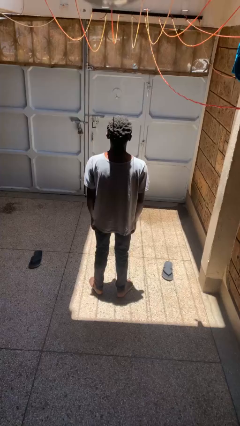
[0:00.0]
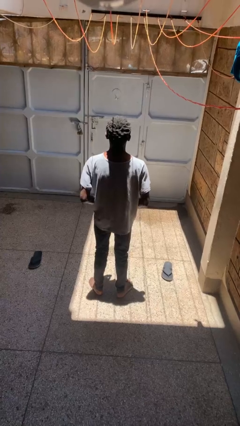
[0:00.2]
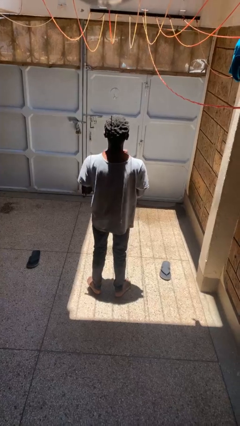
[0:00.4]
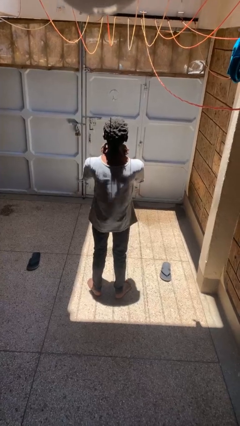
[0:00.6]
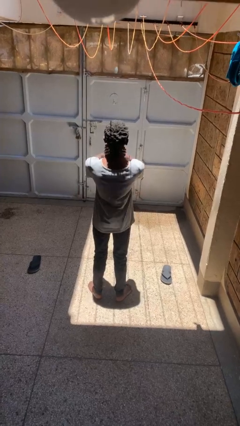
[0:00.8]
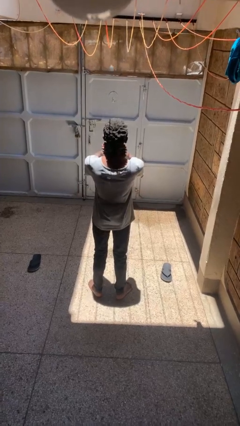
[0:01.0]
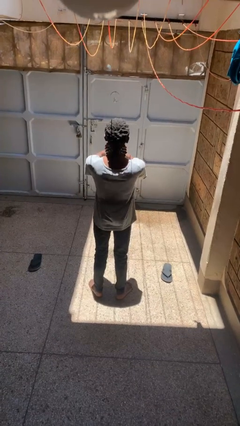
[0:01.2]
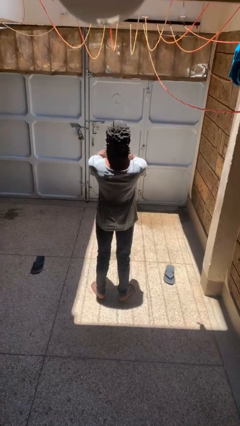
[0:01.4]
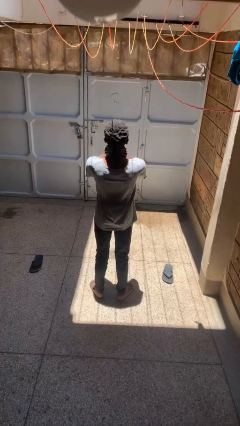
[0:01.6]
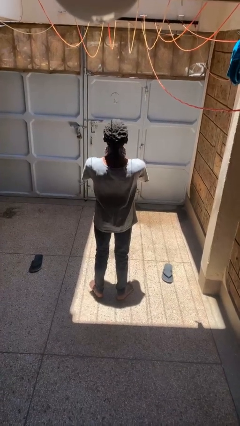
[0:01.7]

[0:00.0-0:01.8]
person rubs neck

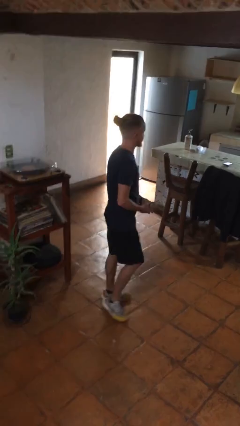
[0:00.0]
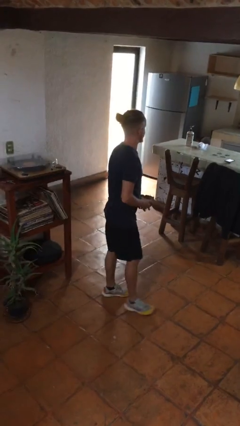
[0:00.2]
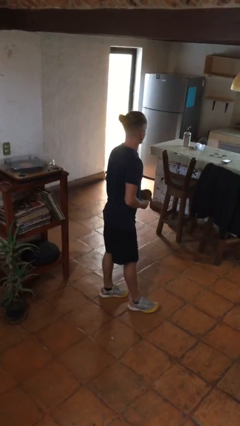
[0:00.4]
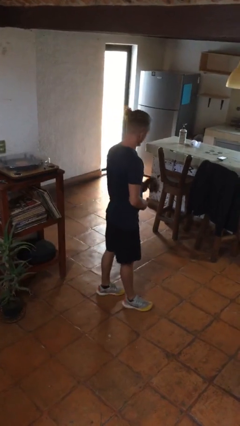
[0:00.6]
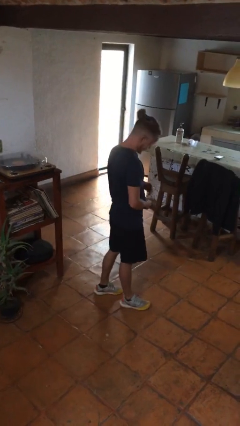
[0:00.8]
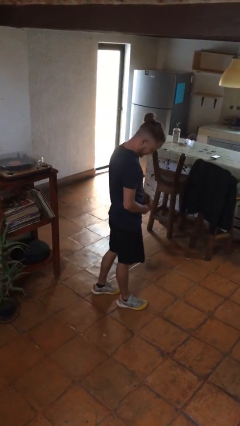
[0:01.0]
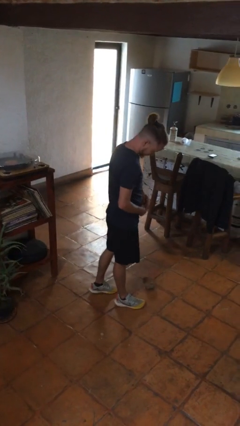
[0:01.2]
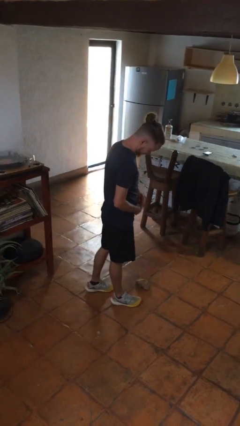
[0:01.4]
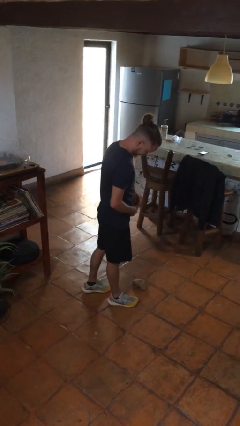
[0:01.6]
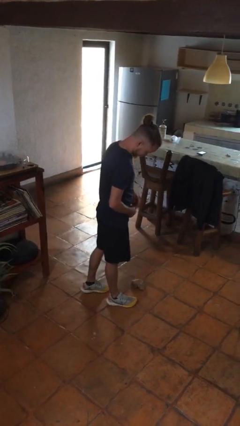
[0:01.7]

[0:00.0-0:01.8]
person drops object

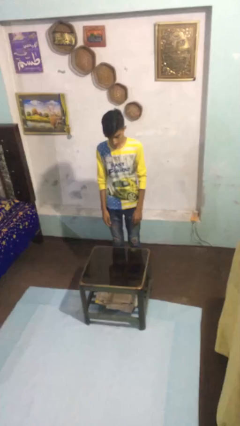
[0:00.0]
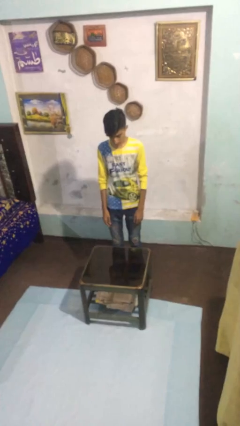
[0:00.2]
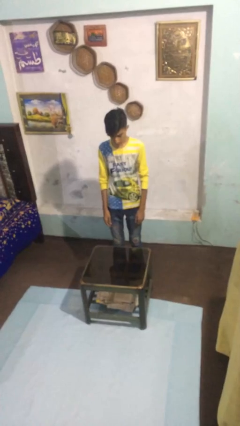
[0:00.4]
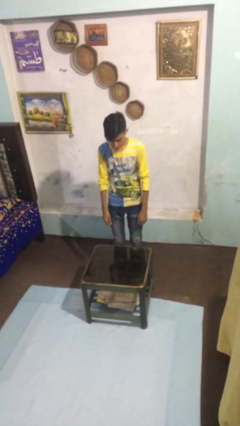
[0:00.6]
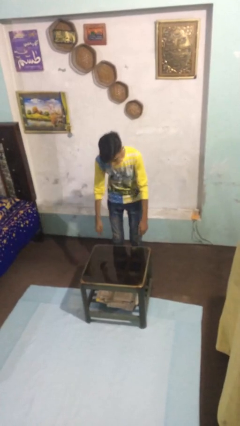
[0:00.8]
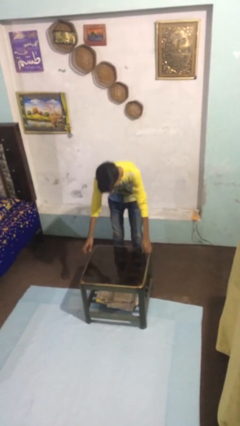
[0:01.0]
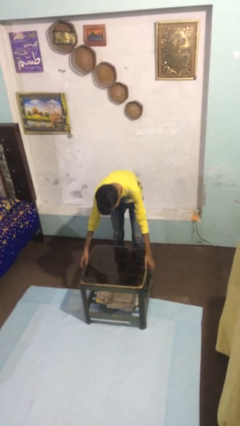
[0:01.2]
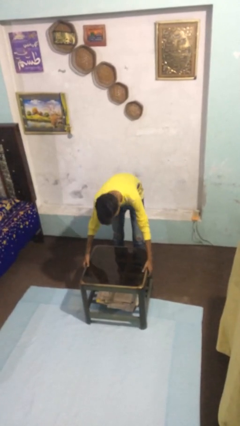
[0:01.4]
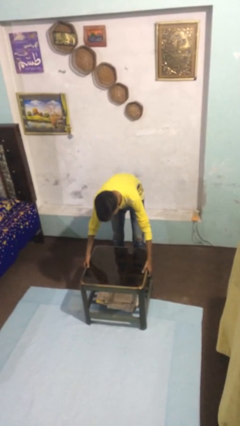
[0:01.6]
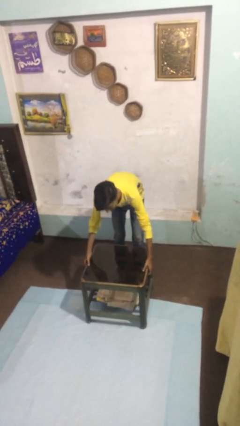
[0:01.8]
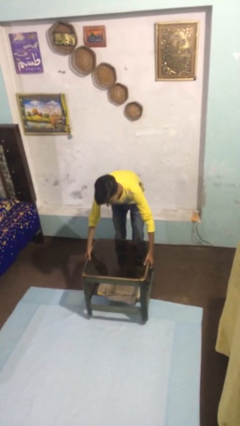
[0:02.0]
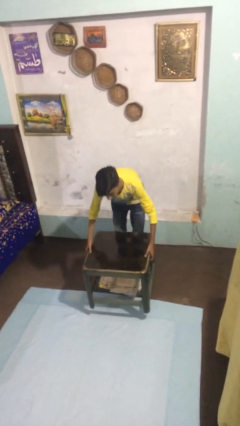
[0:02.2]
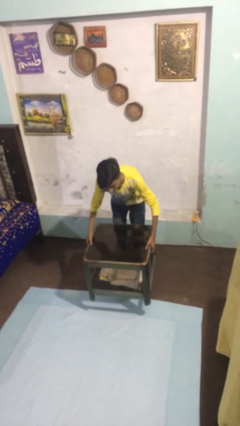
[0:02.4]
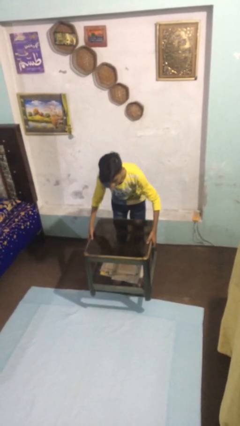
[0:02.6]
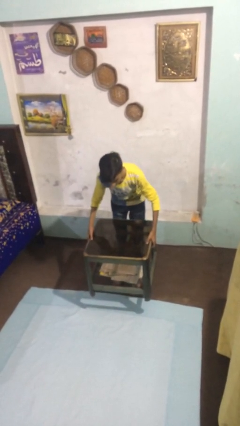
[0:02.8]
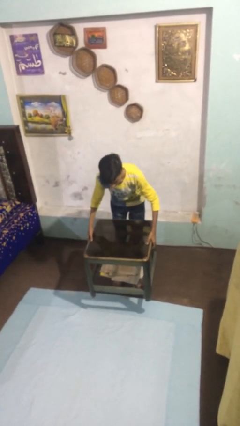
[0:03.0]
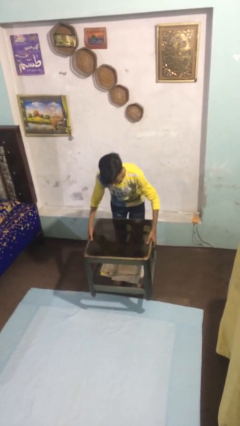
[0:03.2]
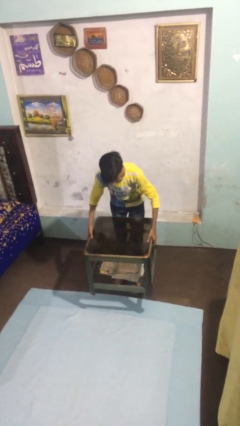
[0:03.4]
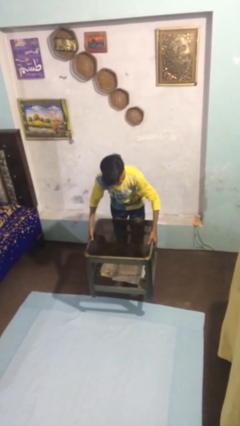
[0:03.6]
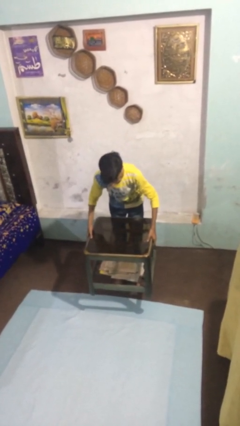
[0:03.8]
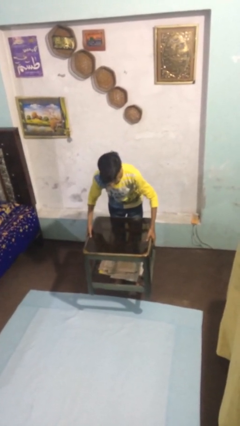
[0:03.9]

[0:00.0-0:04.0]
person picks up object from floor

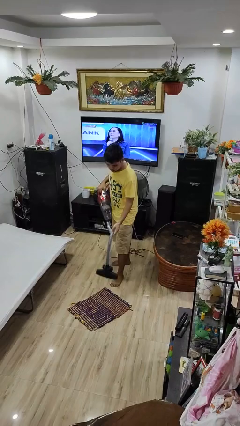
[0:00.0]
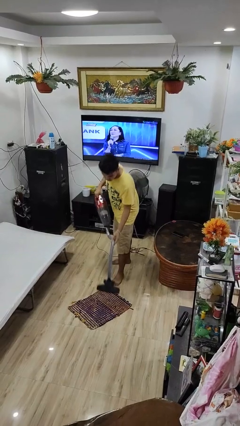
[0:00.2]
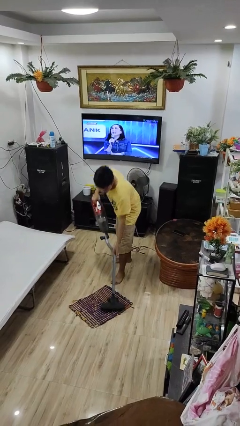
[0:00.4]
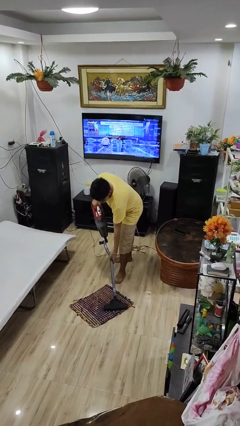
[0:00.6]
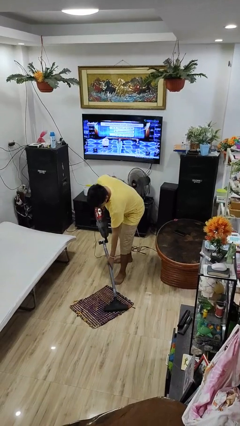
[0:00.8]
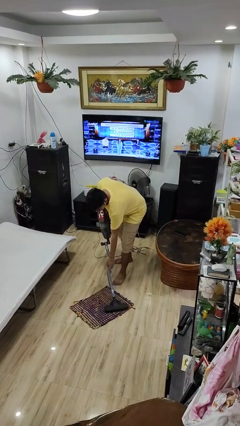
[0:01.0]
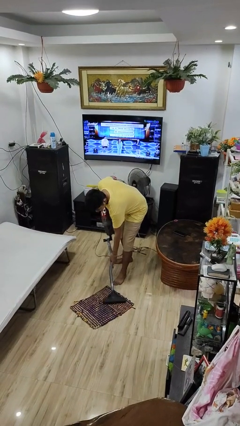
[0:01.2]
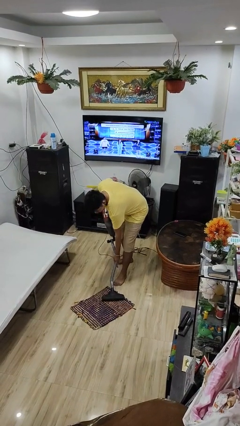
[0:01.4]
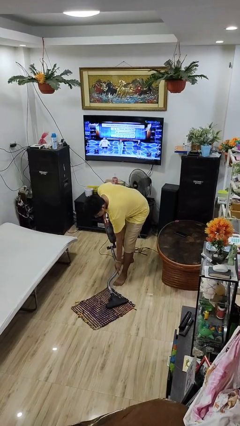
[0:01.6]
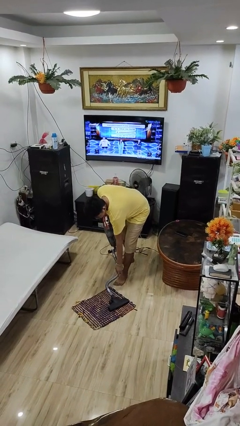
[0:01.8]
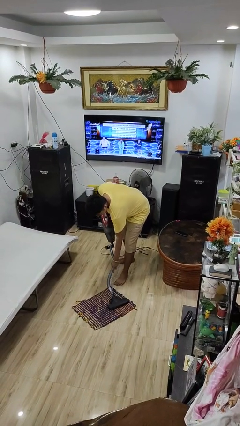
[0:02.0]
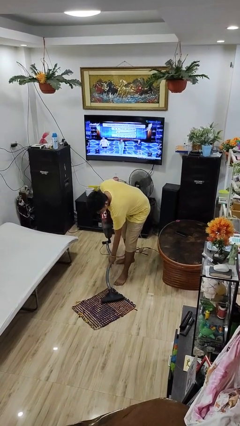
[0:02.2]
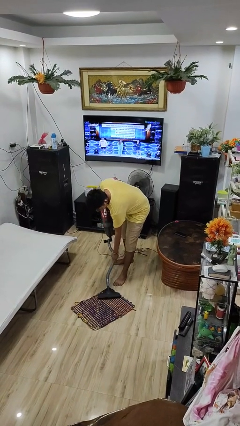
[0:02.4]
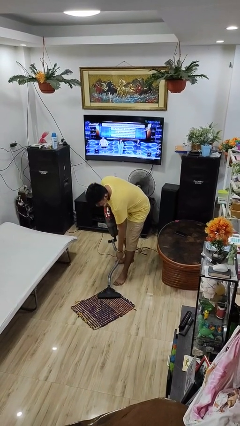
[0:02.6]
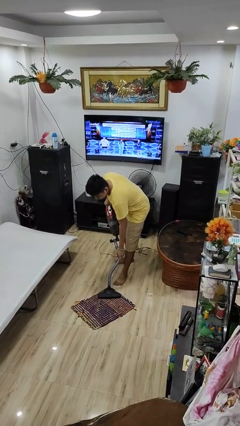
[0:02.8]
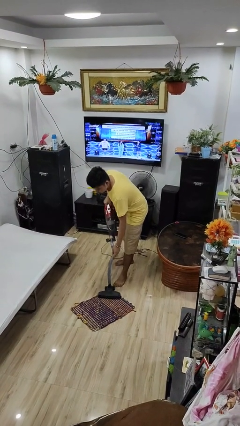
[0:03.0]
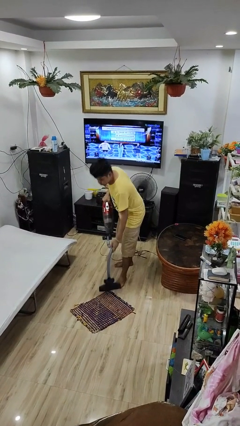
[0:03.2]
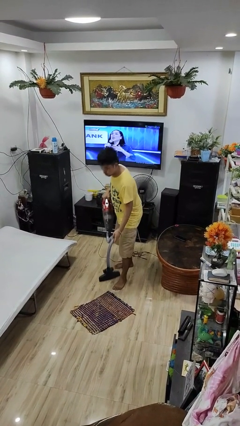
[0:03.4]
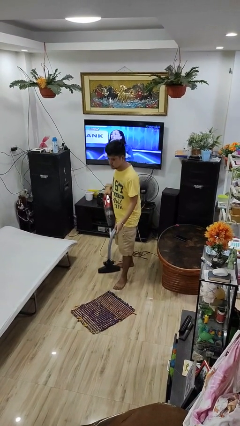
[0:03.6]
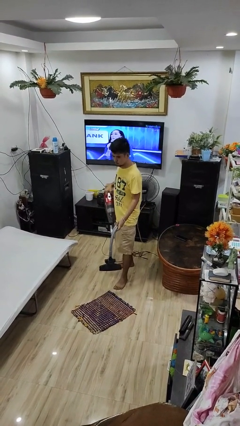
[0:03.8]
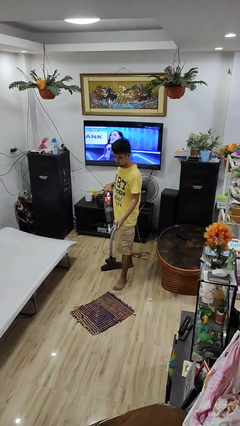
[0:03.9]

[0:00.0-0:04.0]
person vacuums carpet

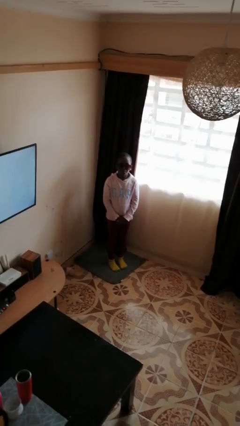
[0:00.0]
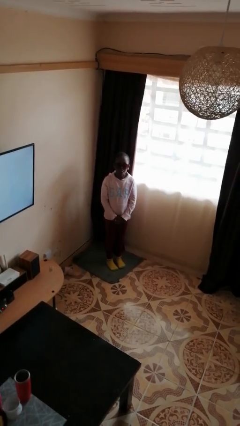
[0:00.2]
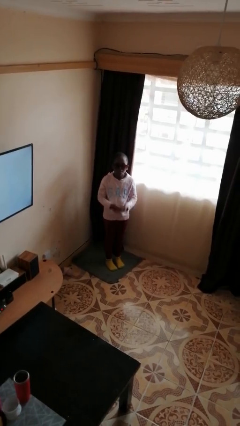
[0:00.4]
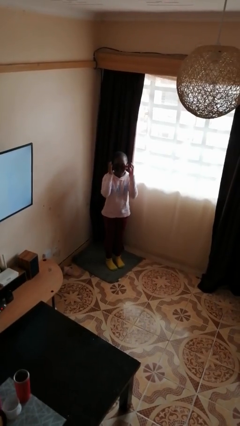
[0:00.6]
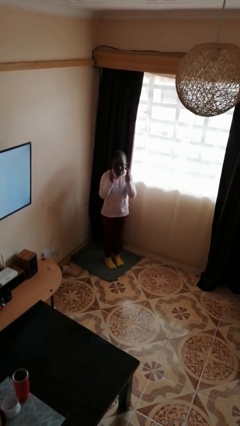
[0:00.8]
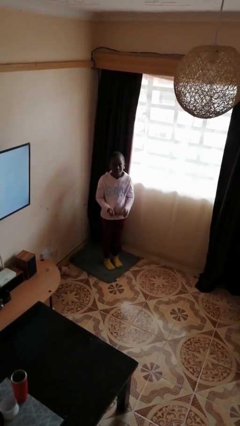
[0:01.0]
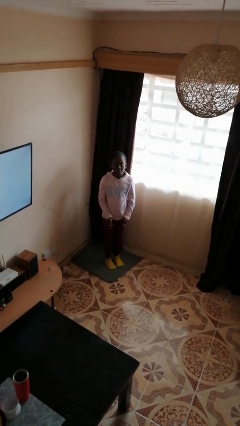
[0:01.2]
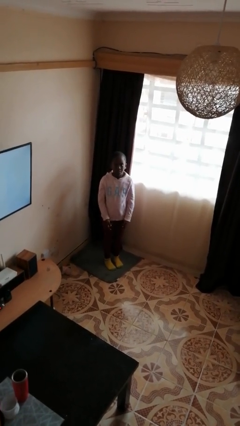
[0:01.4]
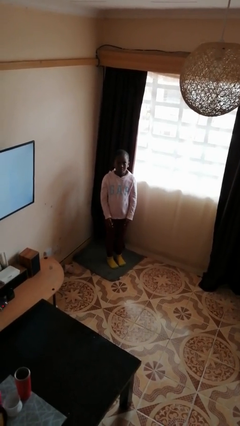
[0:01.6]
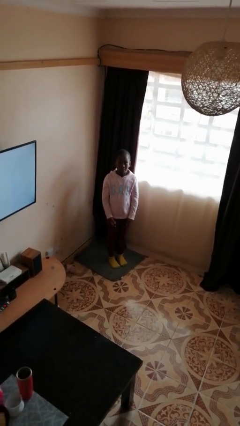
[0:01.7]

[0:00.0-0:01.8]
person takes off sunglasses

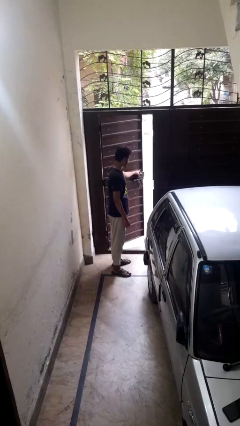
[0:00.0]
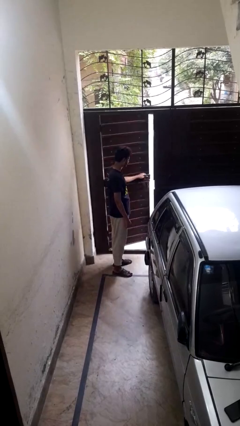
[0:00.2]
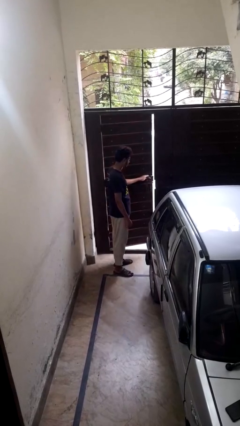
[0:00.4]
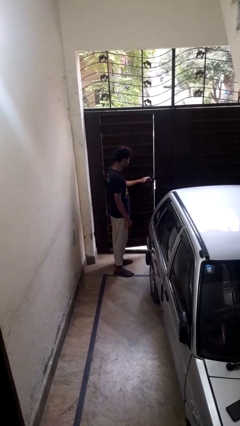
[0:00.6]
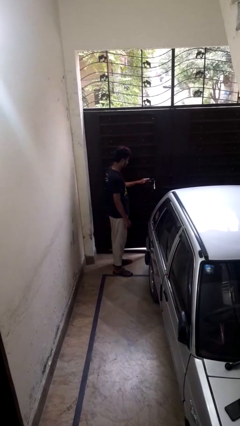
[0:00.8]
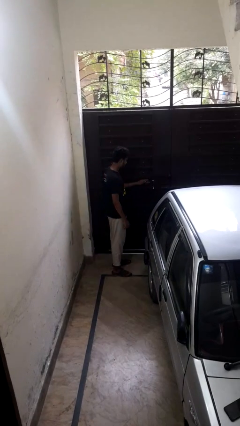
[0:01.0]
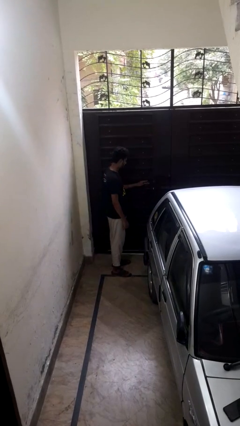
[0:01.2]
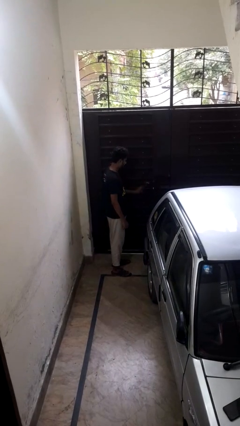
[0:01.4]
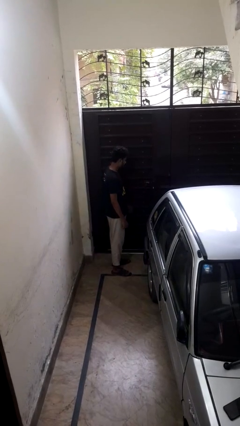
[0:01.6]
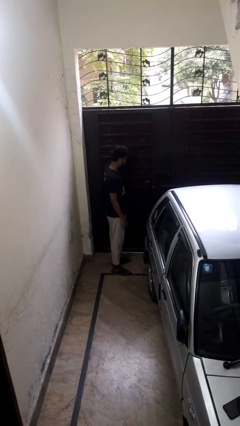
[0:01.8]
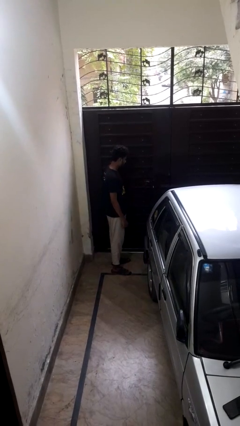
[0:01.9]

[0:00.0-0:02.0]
person closes gate

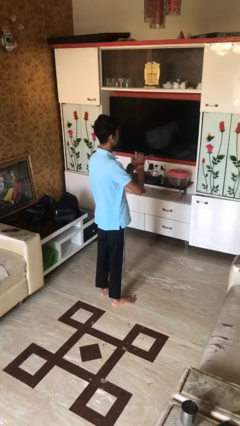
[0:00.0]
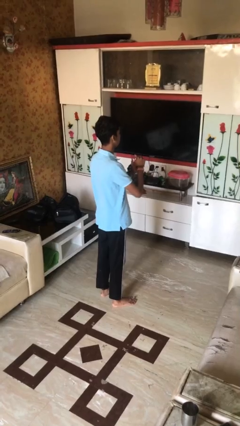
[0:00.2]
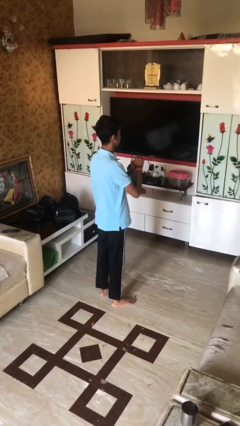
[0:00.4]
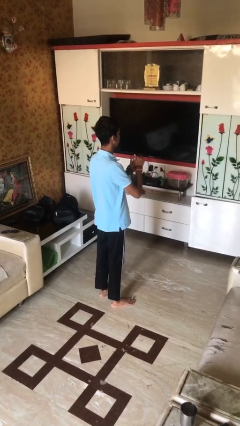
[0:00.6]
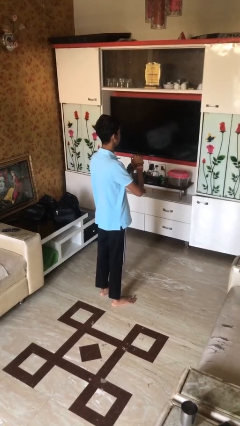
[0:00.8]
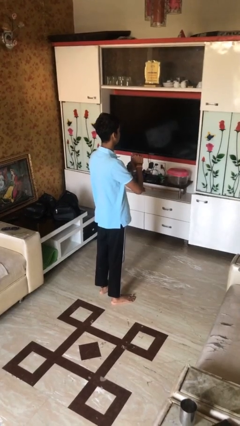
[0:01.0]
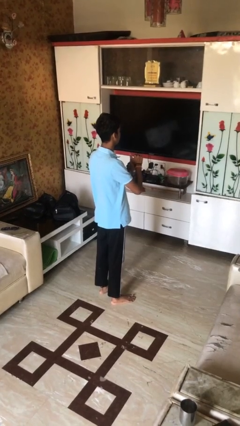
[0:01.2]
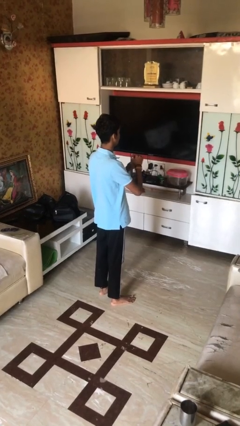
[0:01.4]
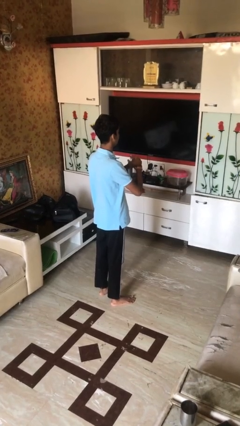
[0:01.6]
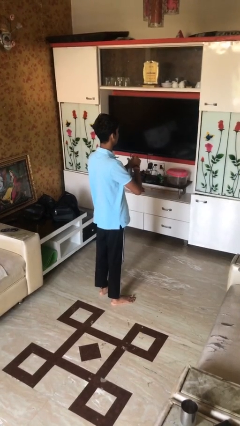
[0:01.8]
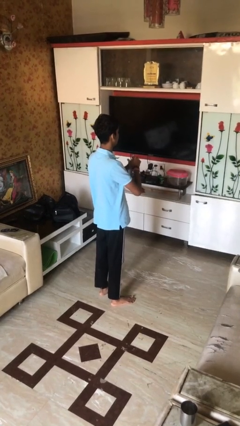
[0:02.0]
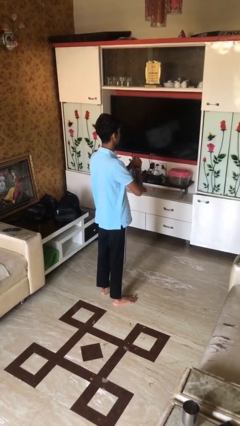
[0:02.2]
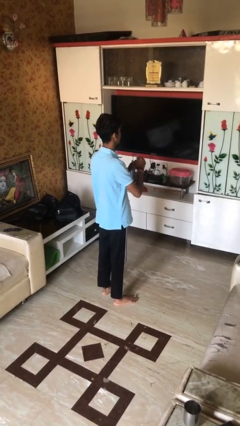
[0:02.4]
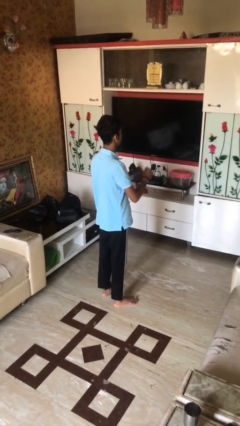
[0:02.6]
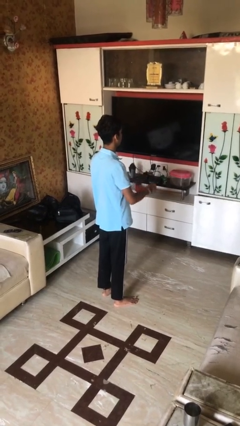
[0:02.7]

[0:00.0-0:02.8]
person cracks knuckles
